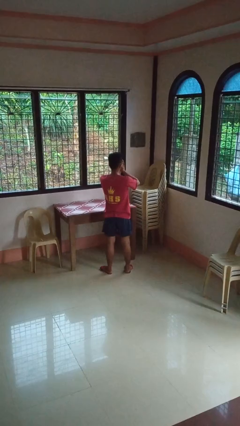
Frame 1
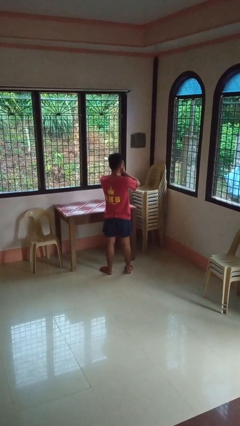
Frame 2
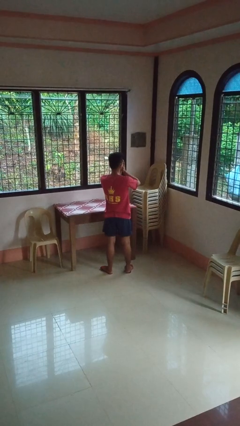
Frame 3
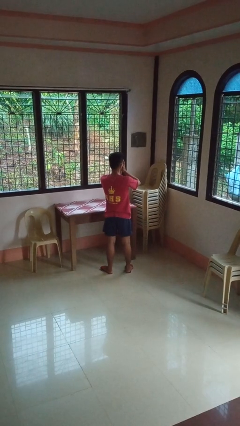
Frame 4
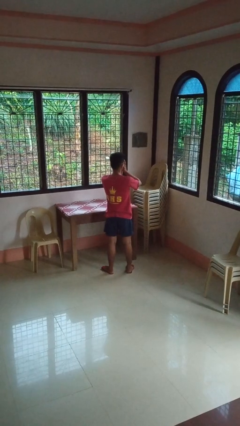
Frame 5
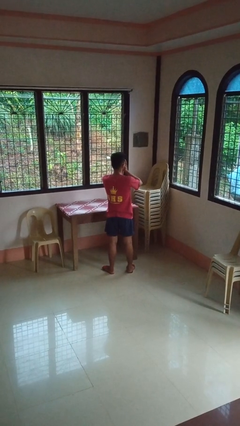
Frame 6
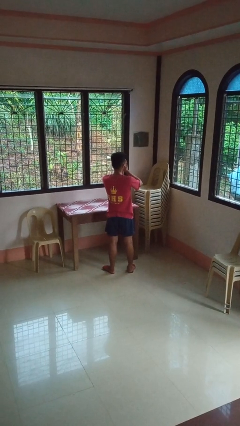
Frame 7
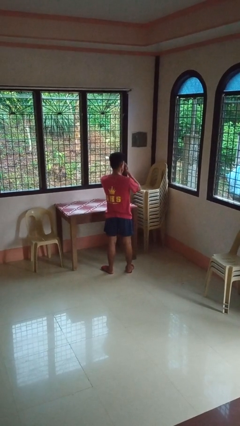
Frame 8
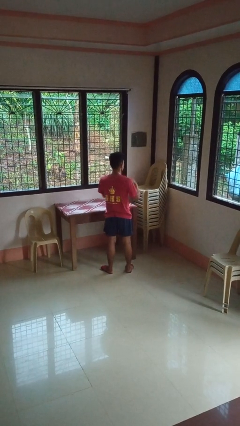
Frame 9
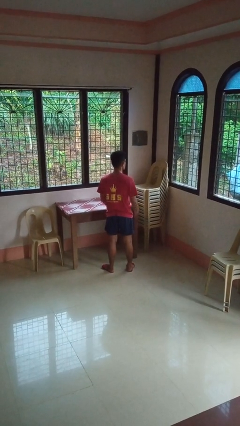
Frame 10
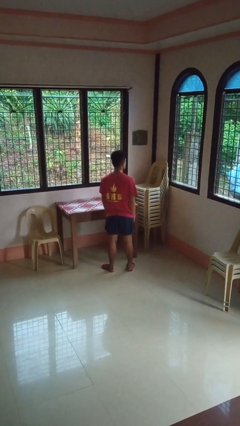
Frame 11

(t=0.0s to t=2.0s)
person covers face with hands

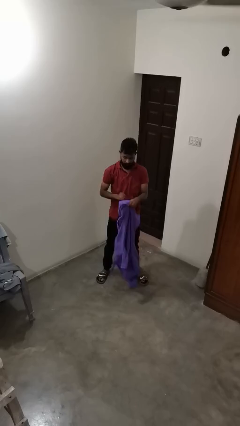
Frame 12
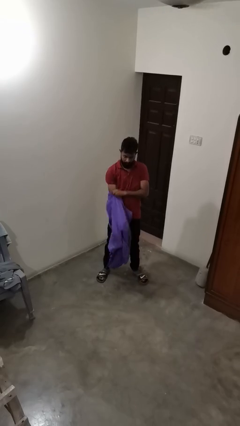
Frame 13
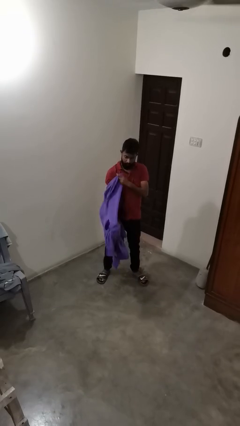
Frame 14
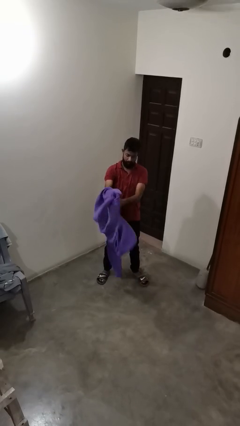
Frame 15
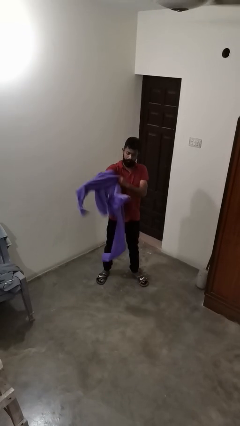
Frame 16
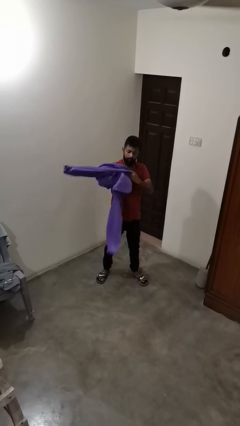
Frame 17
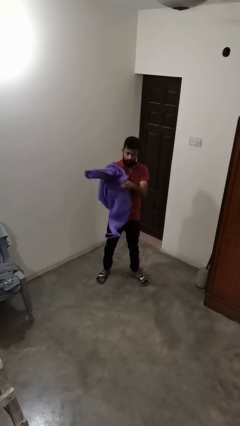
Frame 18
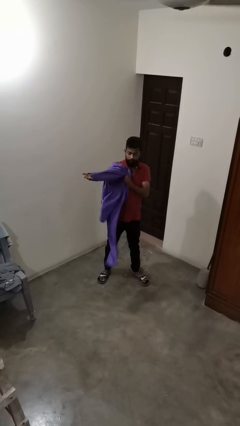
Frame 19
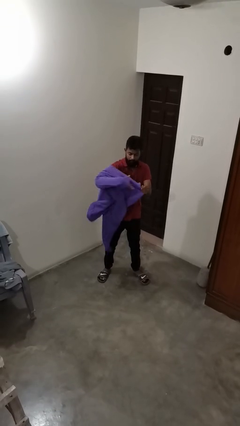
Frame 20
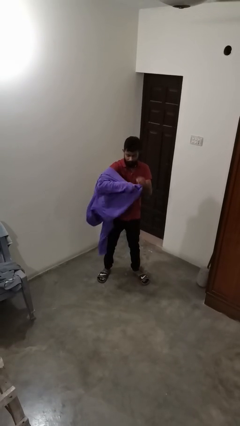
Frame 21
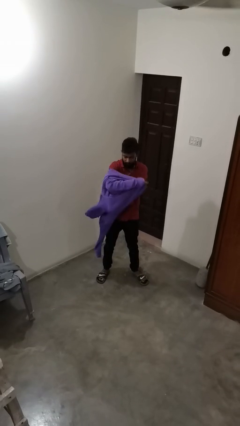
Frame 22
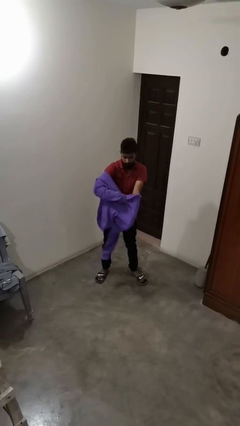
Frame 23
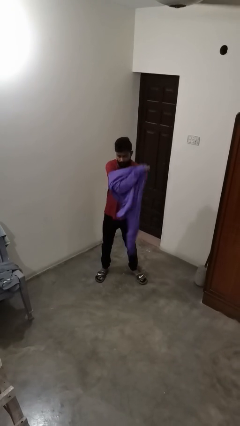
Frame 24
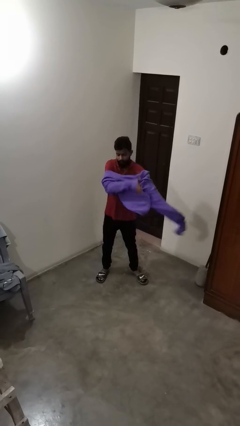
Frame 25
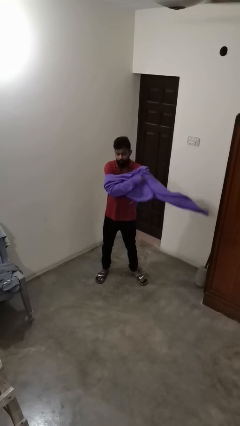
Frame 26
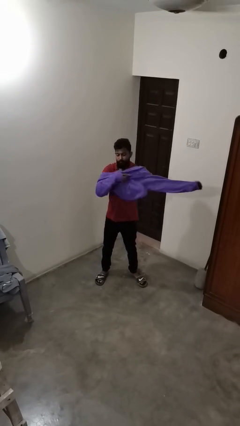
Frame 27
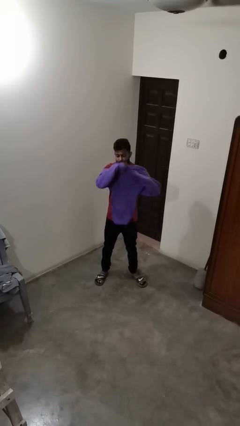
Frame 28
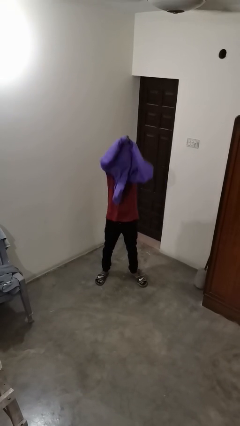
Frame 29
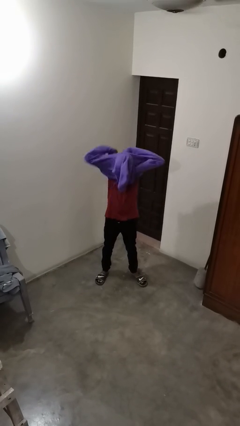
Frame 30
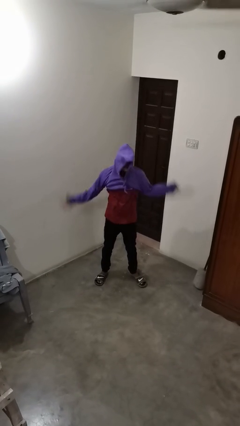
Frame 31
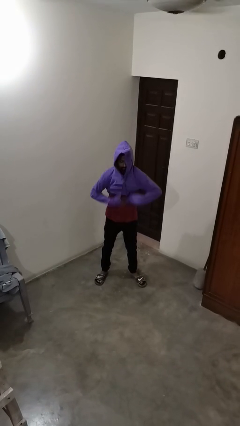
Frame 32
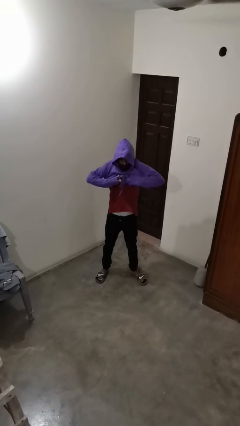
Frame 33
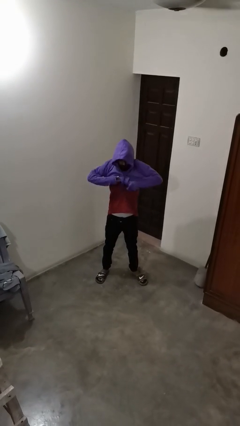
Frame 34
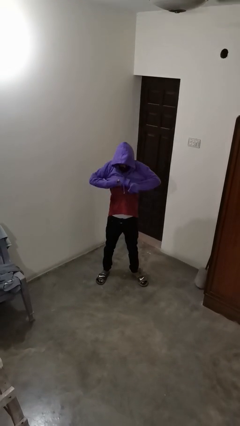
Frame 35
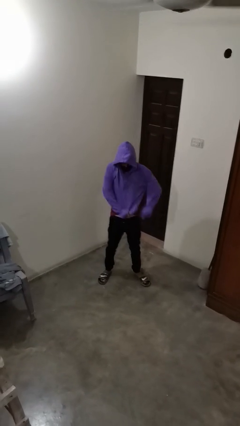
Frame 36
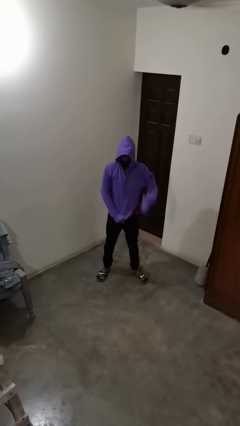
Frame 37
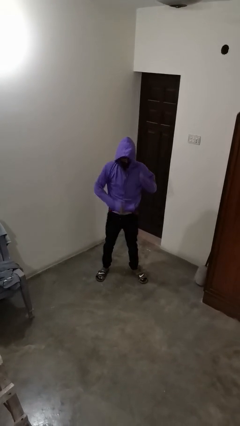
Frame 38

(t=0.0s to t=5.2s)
person puts on hoodie

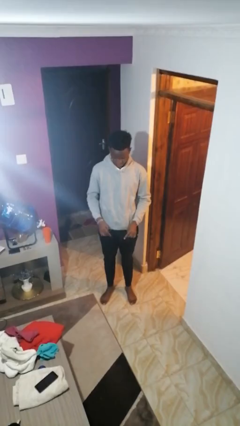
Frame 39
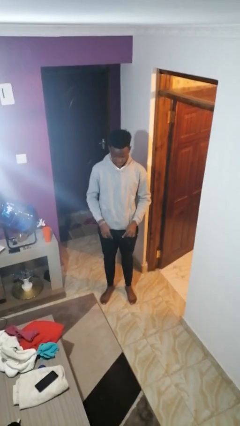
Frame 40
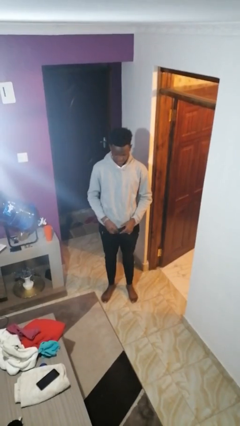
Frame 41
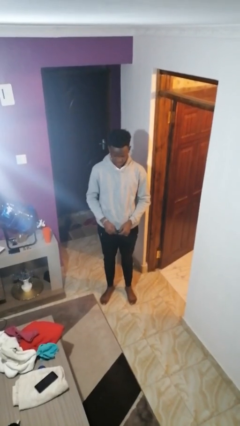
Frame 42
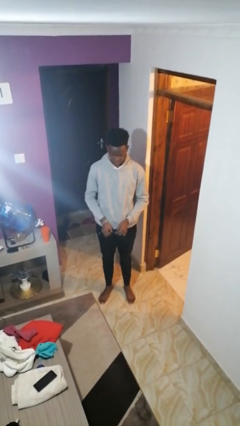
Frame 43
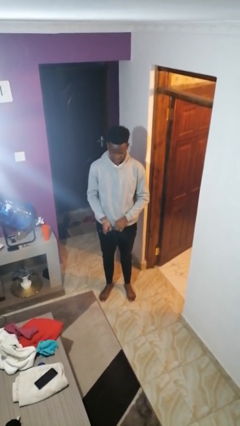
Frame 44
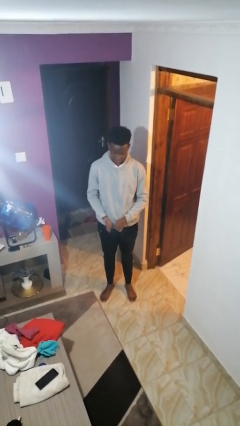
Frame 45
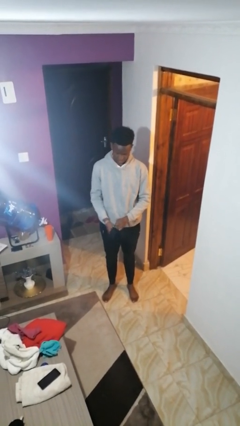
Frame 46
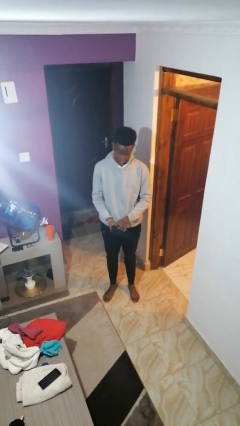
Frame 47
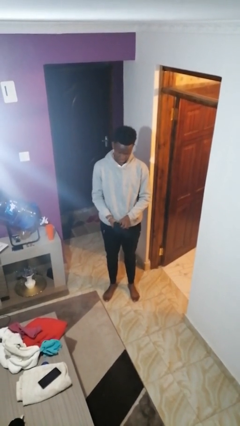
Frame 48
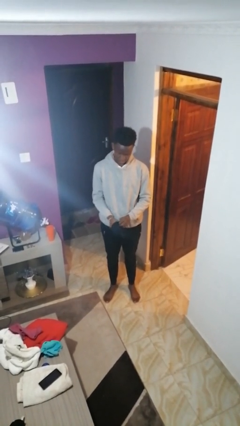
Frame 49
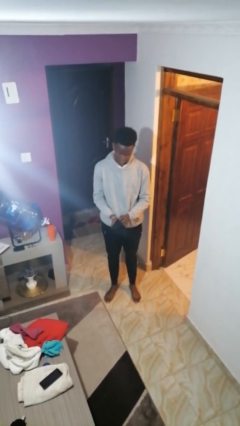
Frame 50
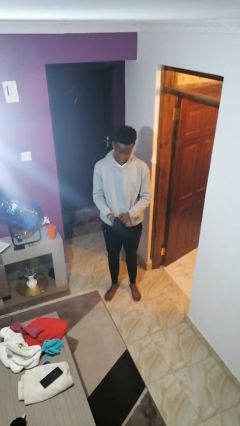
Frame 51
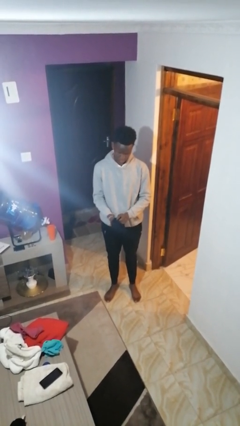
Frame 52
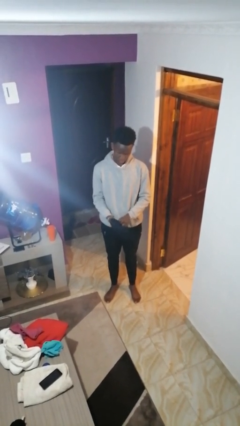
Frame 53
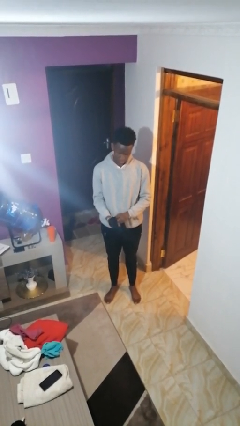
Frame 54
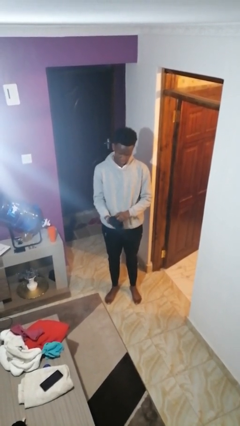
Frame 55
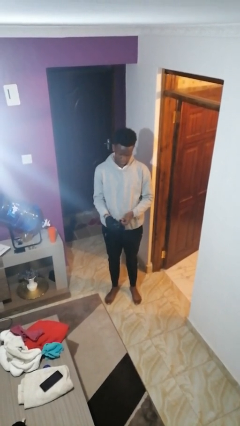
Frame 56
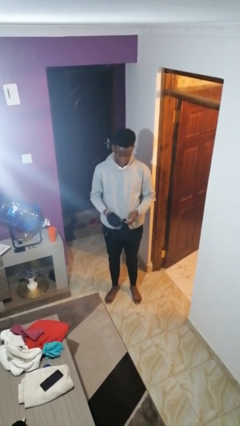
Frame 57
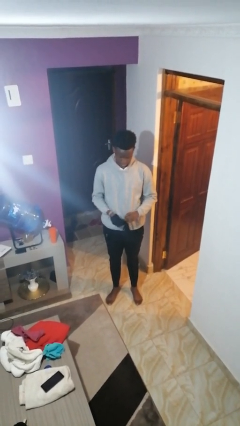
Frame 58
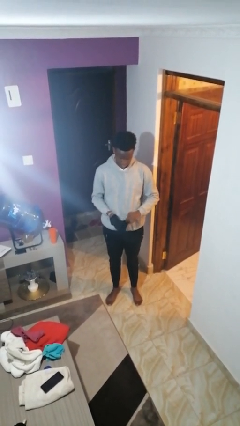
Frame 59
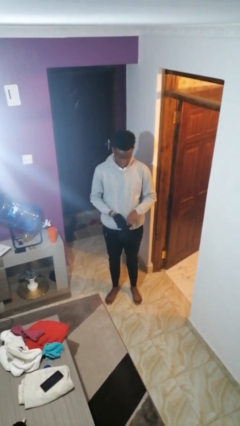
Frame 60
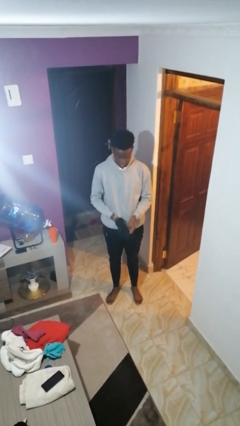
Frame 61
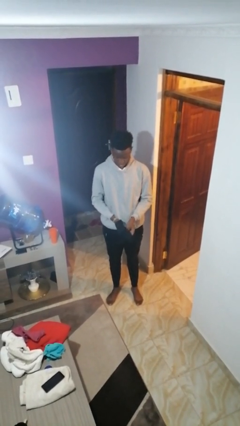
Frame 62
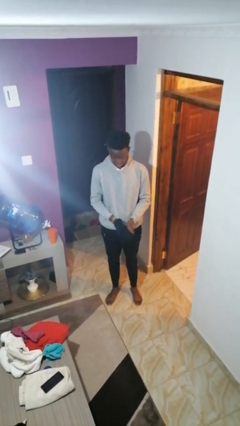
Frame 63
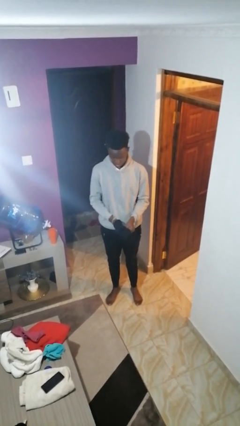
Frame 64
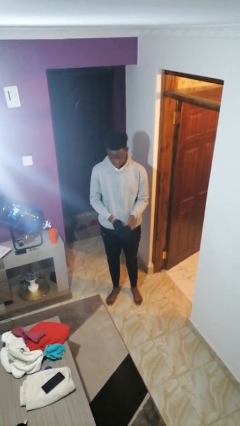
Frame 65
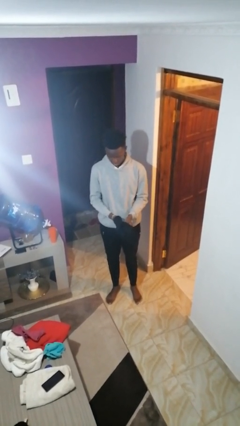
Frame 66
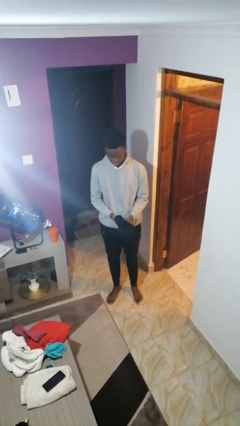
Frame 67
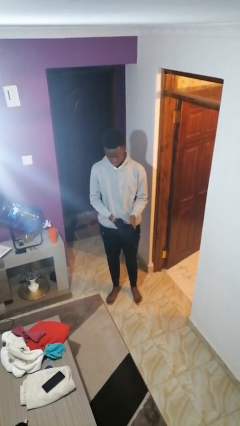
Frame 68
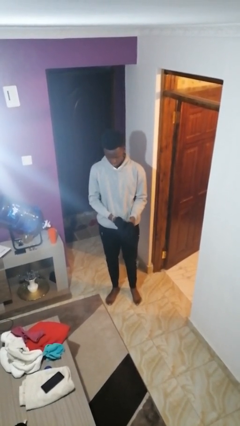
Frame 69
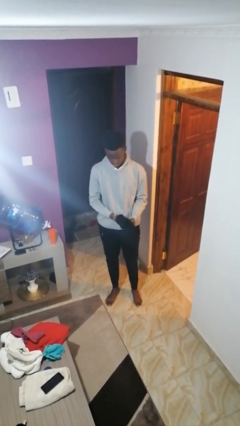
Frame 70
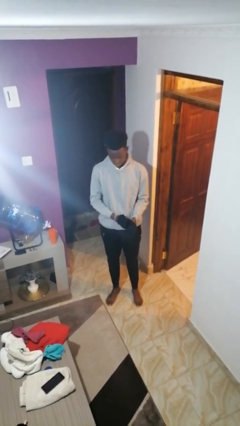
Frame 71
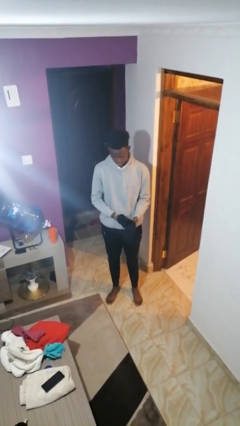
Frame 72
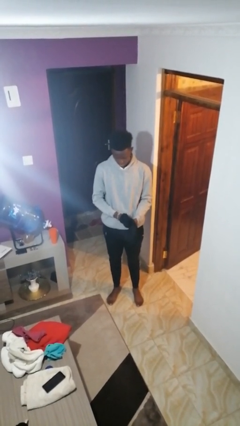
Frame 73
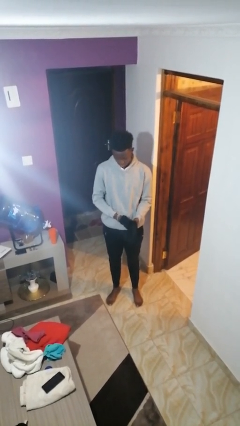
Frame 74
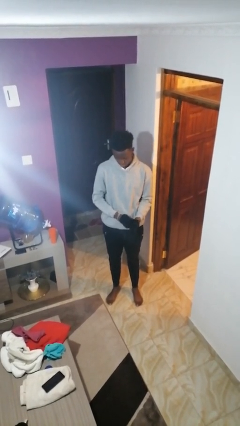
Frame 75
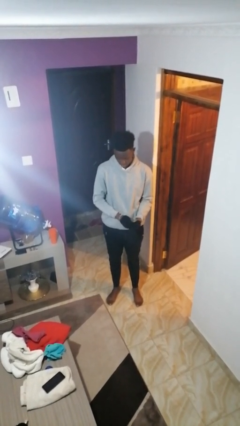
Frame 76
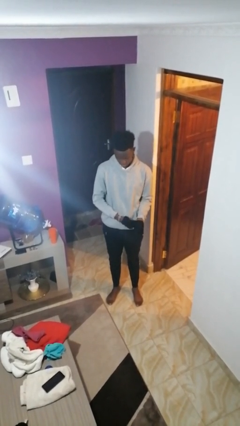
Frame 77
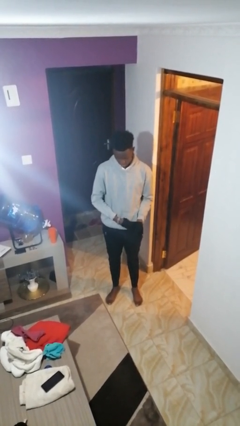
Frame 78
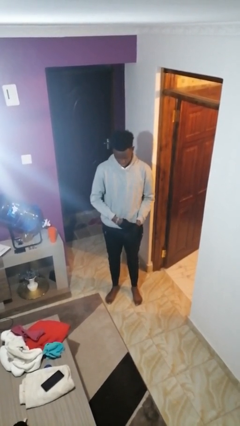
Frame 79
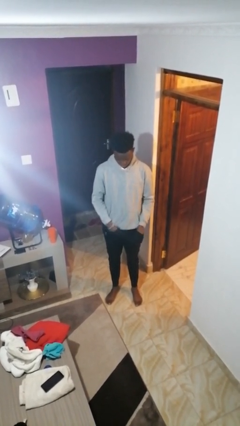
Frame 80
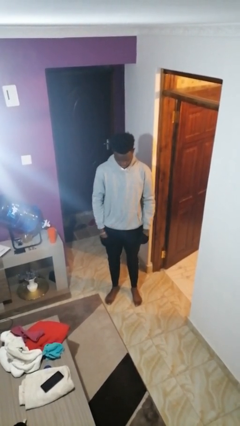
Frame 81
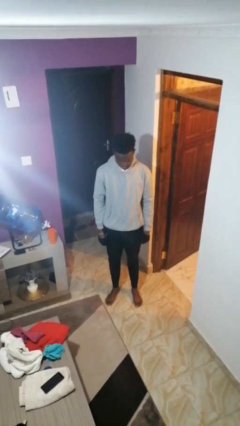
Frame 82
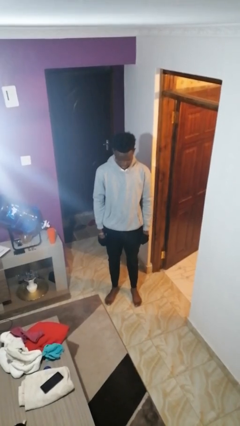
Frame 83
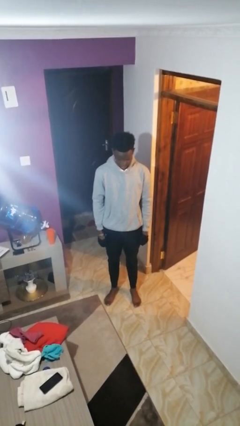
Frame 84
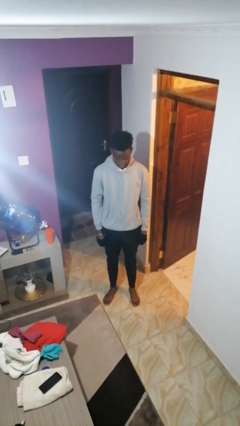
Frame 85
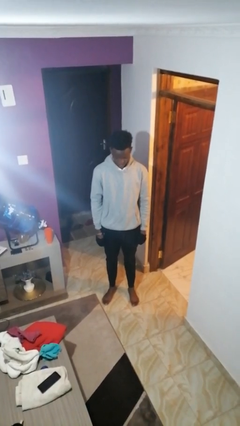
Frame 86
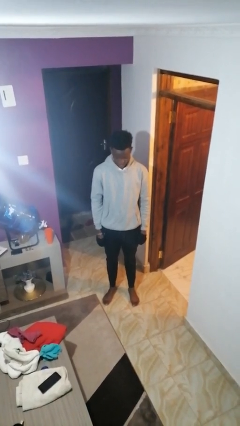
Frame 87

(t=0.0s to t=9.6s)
person puts on gloves

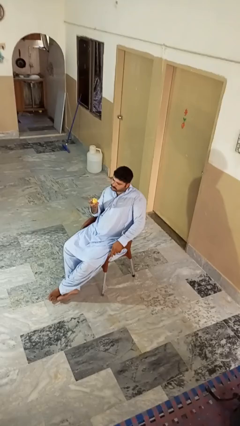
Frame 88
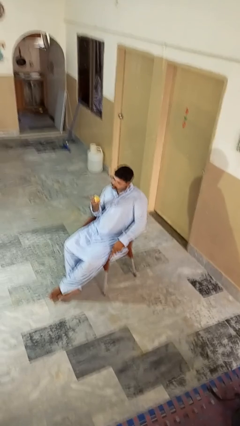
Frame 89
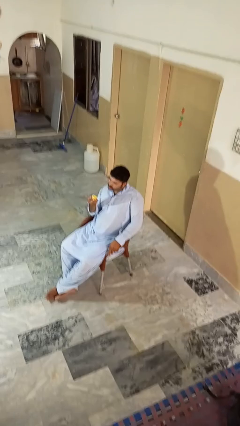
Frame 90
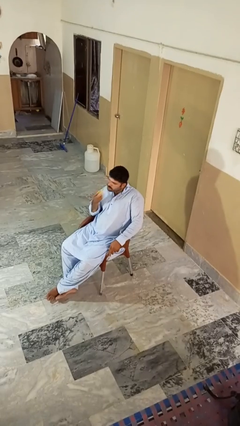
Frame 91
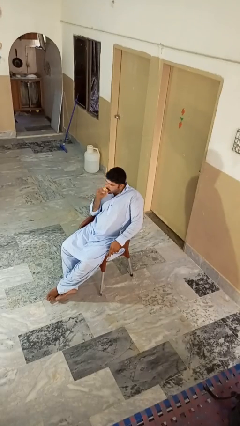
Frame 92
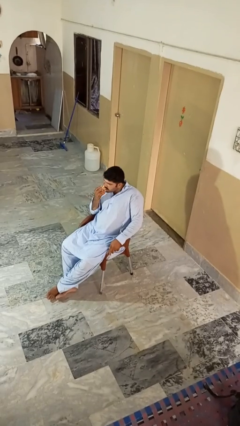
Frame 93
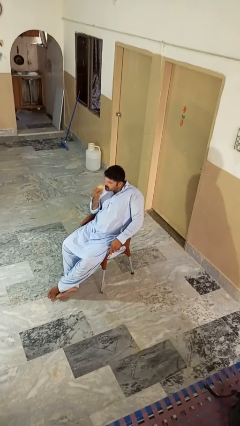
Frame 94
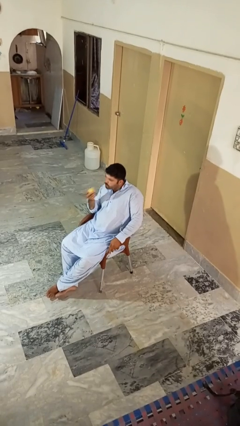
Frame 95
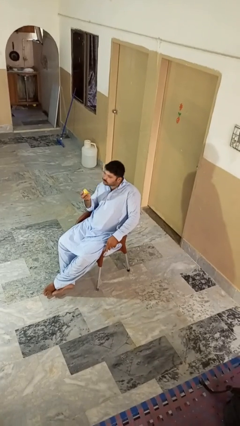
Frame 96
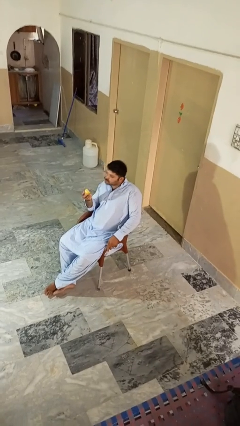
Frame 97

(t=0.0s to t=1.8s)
person eats apple
